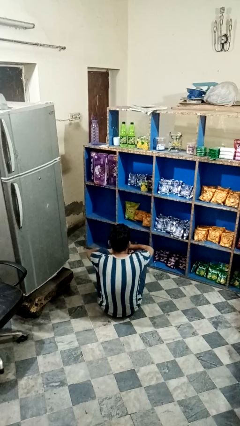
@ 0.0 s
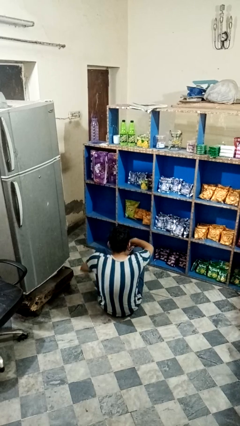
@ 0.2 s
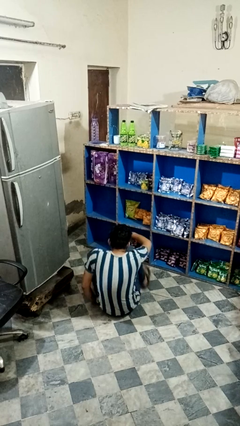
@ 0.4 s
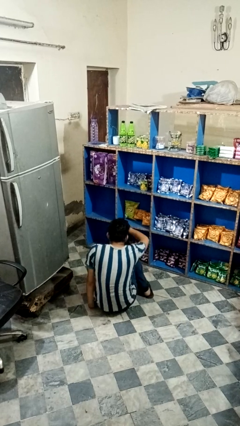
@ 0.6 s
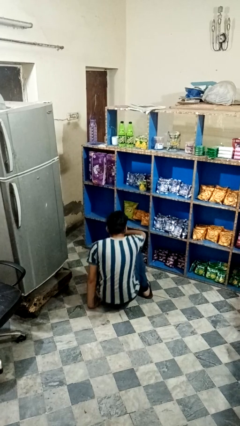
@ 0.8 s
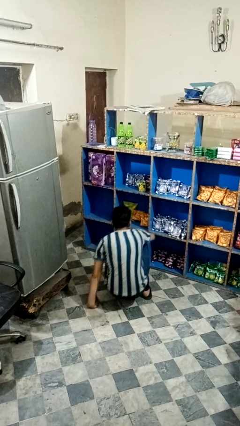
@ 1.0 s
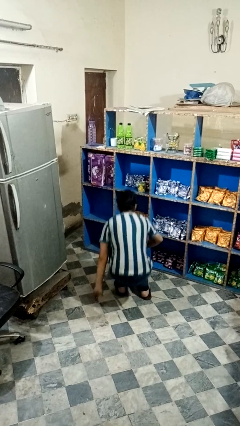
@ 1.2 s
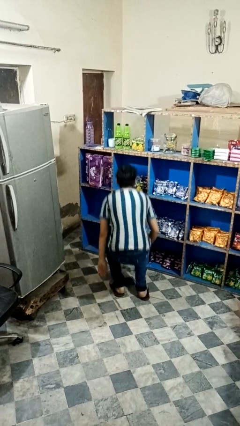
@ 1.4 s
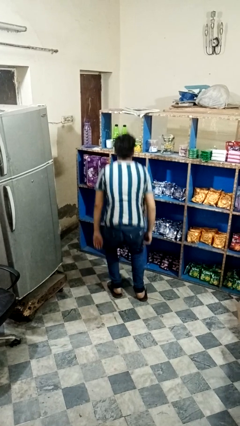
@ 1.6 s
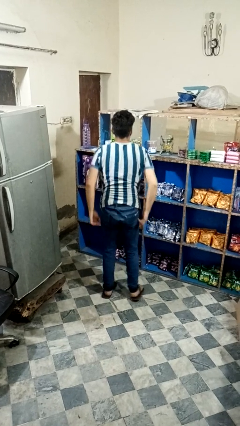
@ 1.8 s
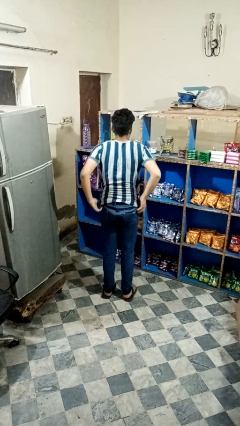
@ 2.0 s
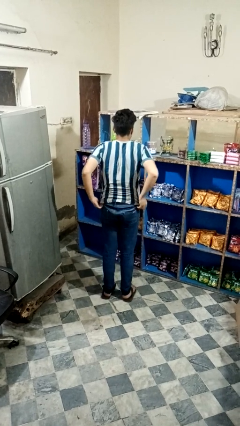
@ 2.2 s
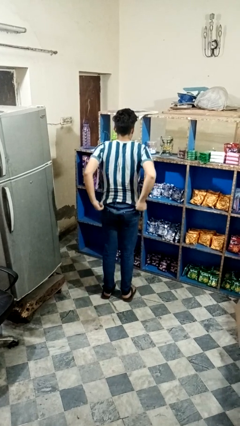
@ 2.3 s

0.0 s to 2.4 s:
person stands up from floor

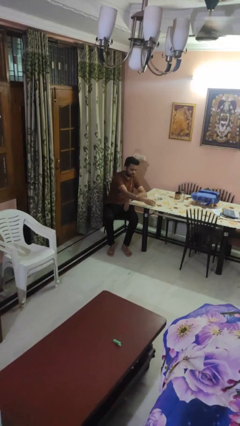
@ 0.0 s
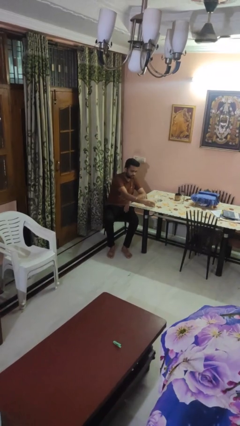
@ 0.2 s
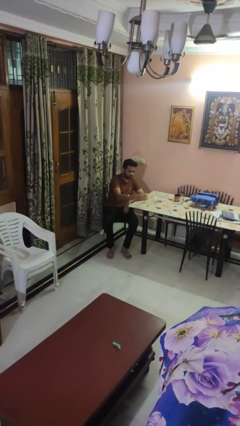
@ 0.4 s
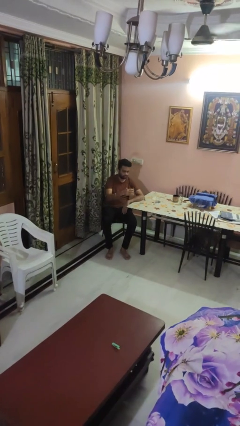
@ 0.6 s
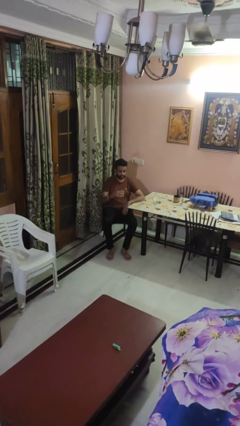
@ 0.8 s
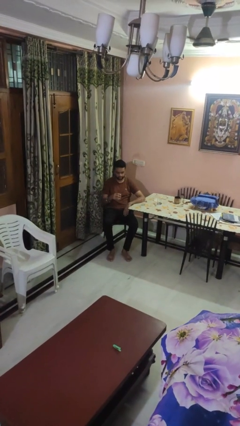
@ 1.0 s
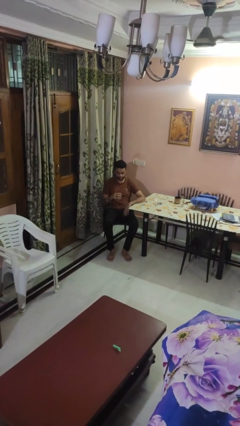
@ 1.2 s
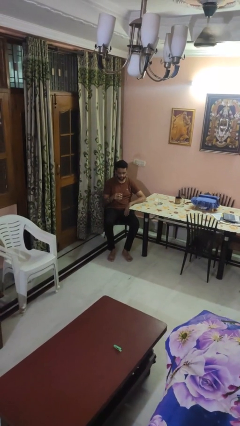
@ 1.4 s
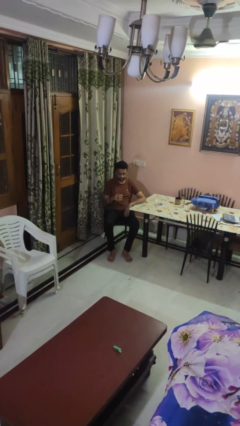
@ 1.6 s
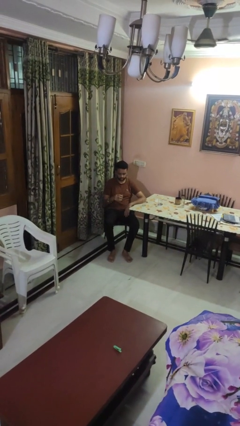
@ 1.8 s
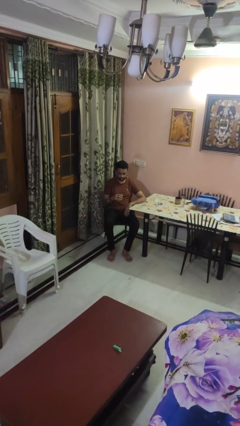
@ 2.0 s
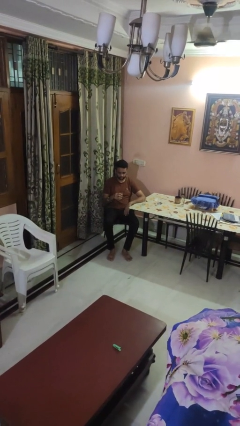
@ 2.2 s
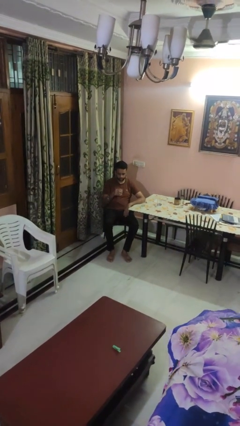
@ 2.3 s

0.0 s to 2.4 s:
person picks up object from table

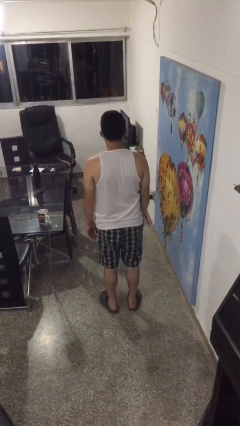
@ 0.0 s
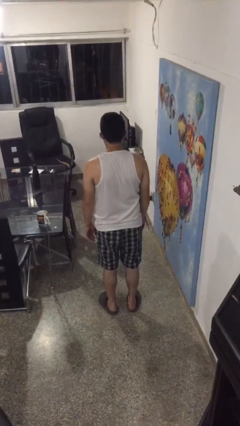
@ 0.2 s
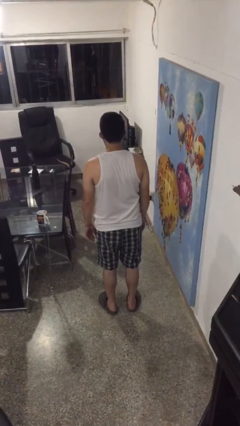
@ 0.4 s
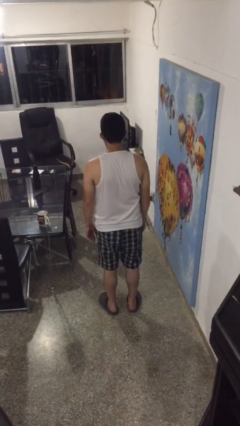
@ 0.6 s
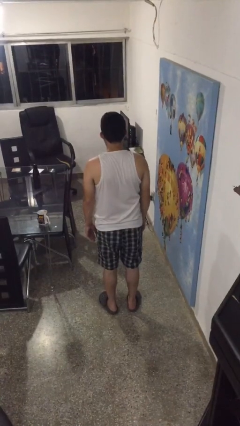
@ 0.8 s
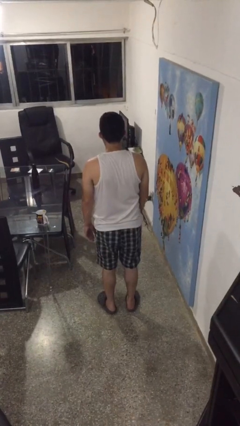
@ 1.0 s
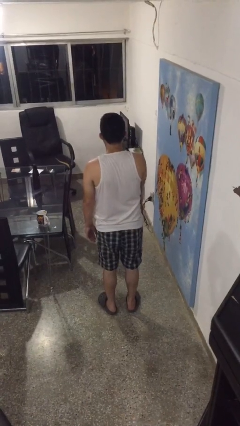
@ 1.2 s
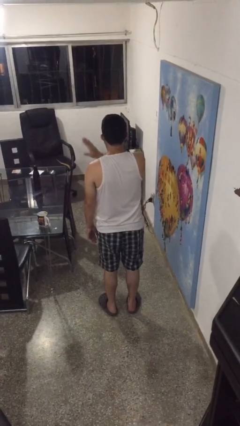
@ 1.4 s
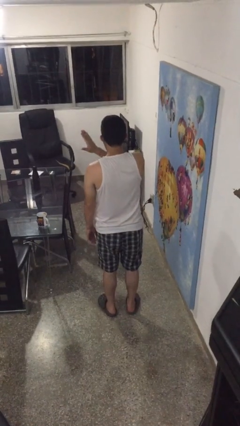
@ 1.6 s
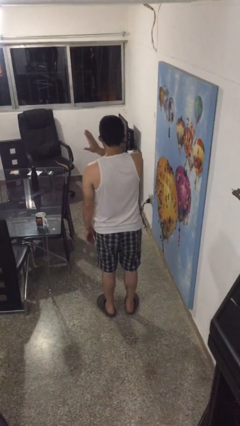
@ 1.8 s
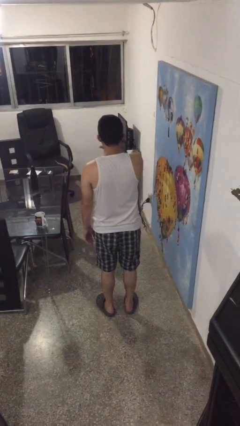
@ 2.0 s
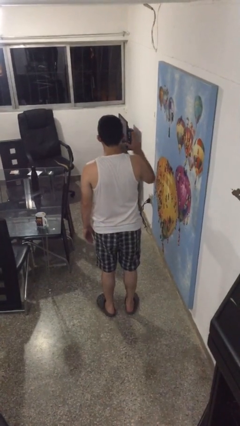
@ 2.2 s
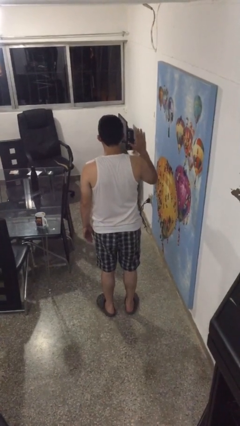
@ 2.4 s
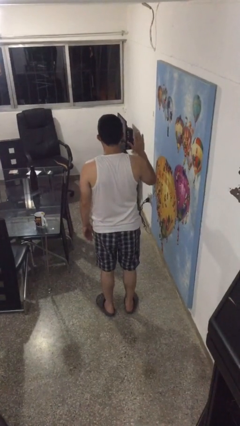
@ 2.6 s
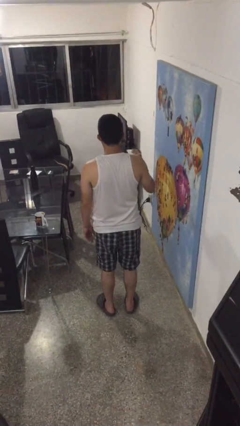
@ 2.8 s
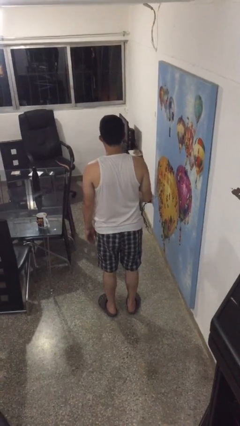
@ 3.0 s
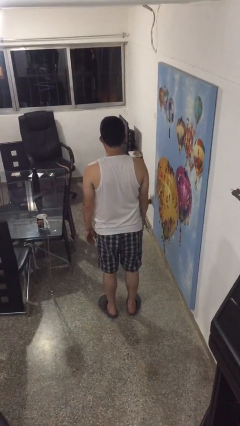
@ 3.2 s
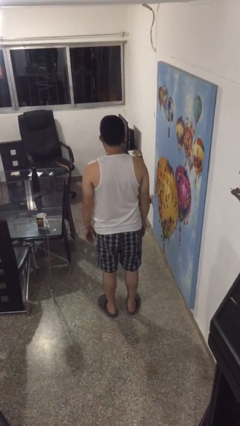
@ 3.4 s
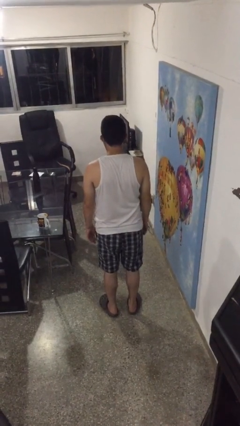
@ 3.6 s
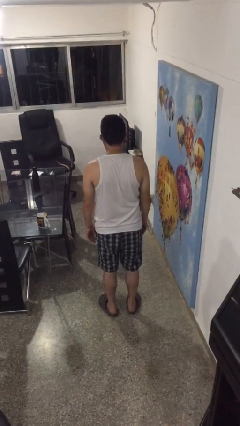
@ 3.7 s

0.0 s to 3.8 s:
person gestures swipe right

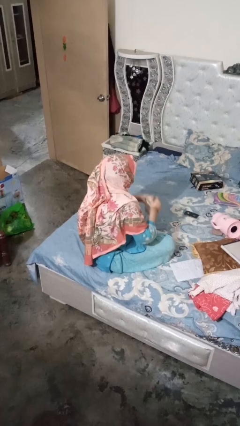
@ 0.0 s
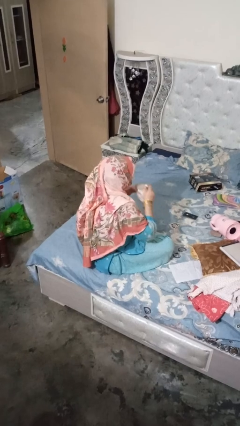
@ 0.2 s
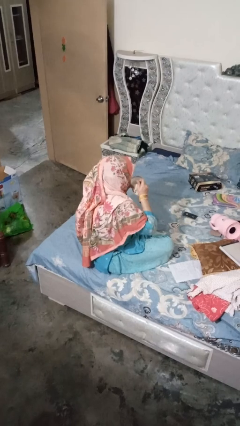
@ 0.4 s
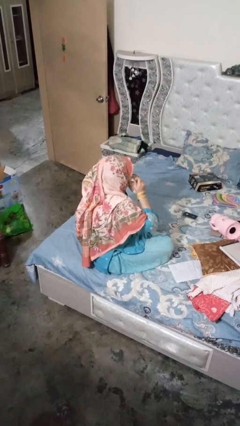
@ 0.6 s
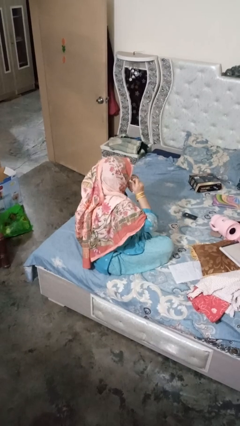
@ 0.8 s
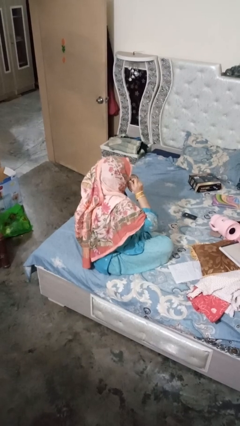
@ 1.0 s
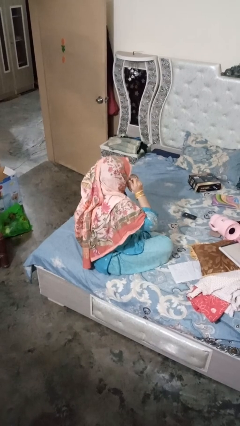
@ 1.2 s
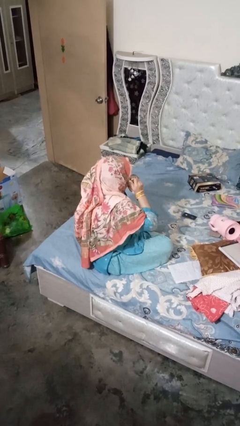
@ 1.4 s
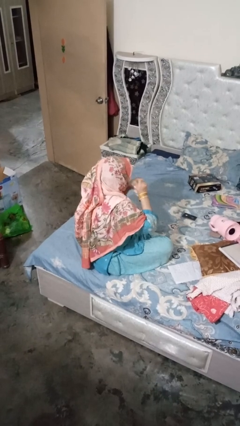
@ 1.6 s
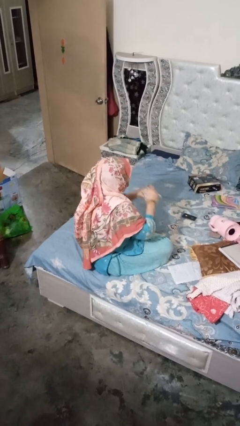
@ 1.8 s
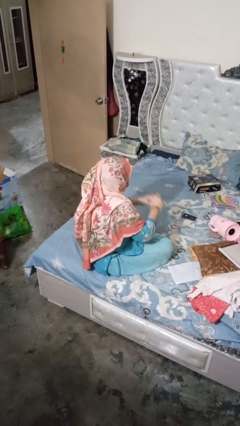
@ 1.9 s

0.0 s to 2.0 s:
person drinks from mug

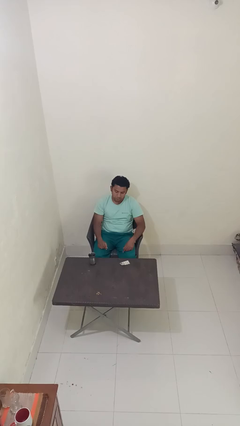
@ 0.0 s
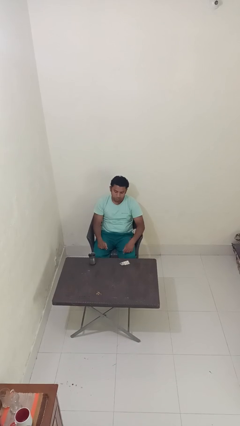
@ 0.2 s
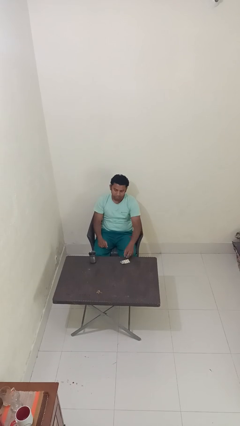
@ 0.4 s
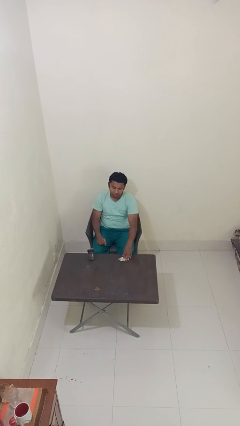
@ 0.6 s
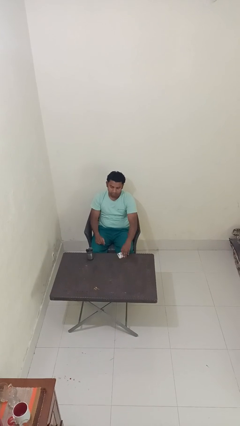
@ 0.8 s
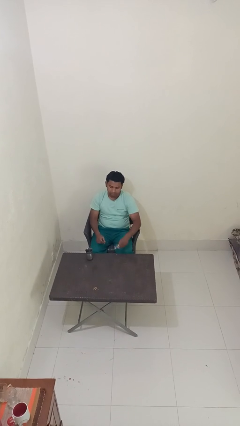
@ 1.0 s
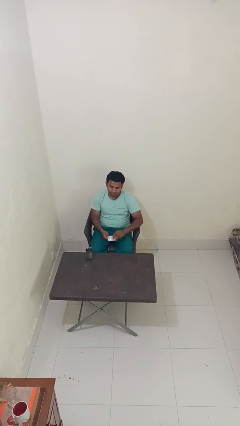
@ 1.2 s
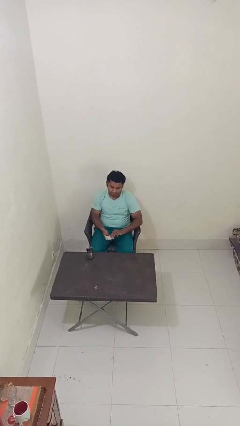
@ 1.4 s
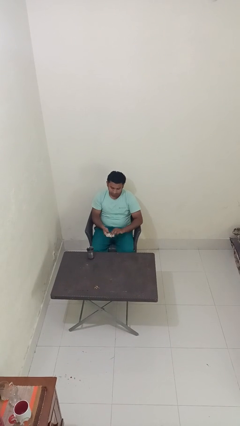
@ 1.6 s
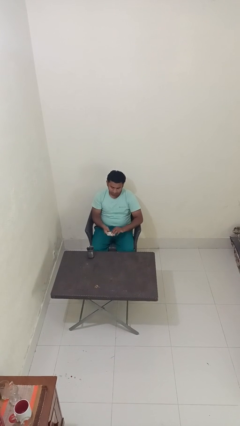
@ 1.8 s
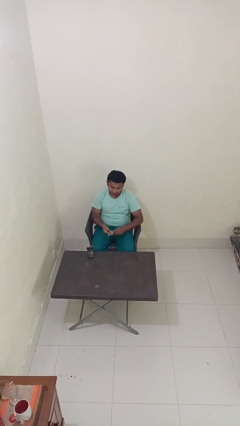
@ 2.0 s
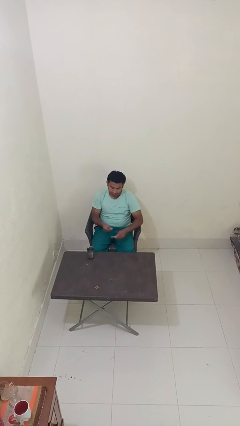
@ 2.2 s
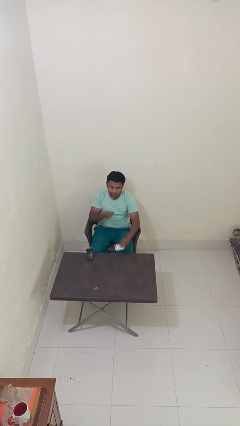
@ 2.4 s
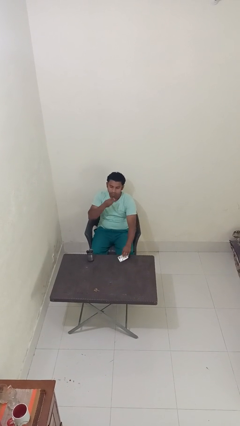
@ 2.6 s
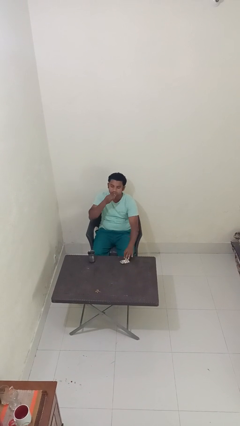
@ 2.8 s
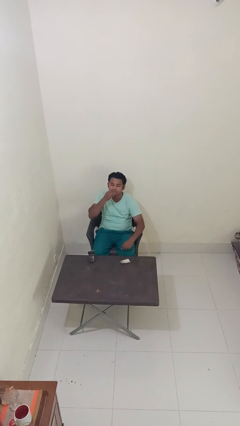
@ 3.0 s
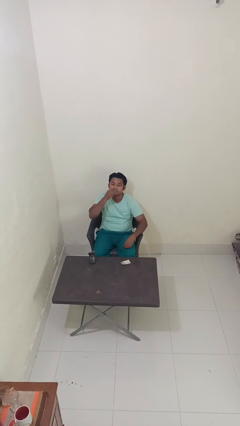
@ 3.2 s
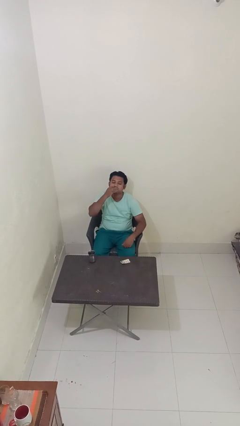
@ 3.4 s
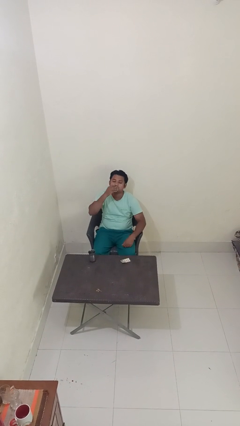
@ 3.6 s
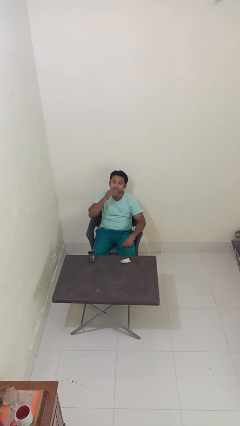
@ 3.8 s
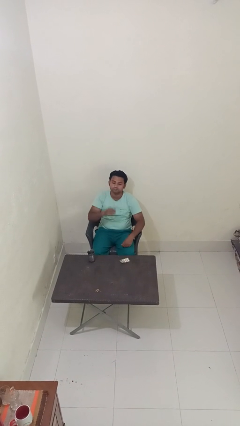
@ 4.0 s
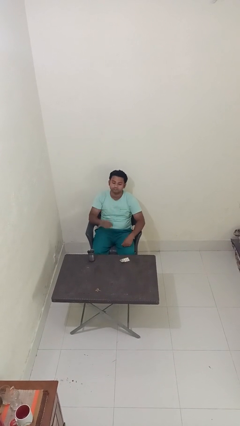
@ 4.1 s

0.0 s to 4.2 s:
person takes medicine pills

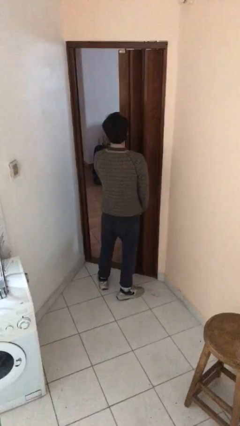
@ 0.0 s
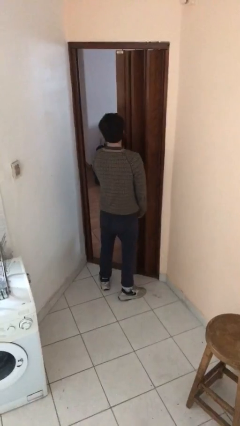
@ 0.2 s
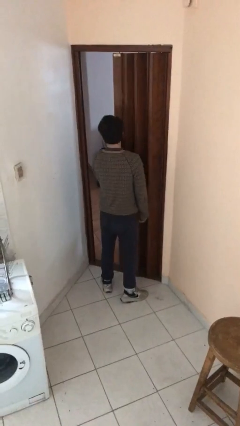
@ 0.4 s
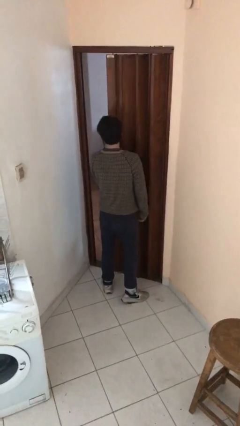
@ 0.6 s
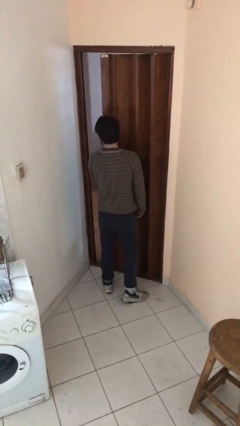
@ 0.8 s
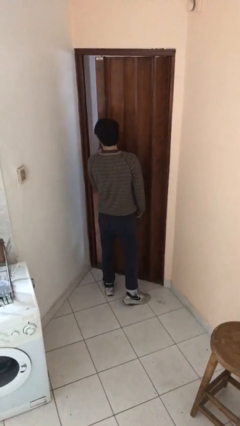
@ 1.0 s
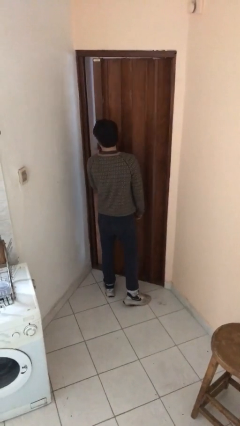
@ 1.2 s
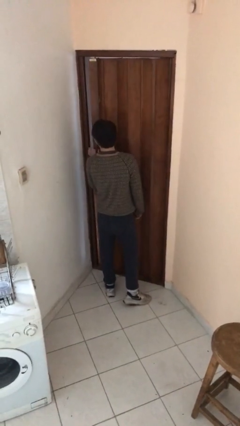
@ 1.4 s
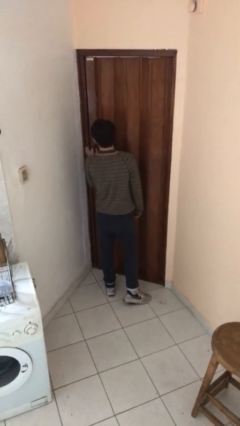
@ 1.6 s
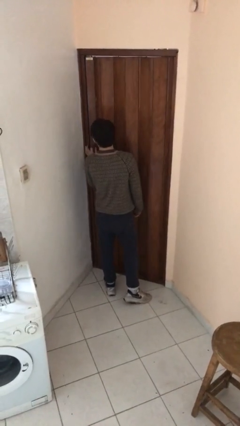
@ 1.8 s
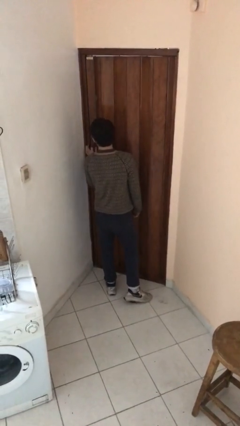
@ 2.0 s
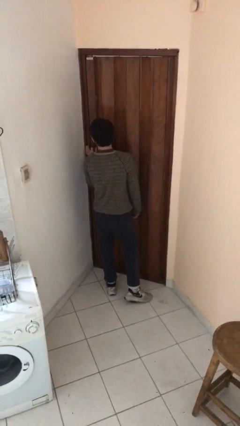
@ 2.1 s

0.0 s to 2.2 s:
person closes sliding door

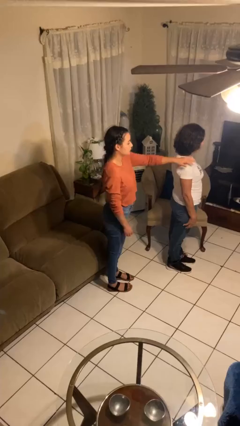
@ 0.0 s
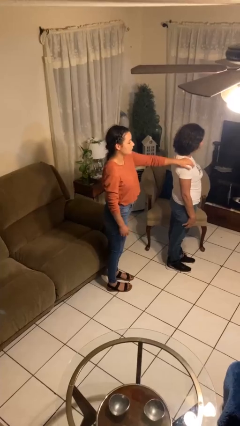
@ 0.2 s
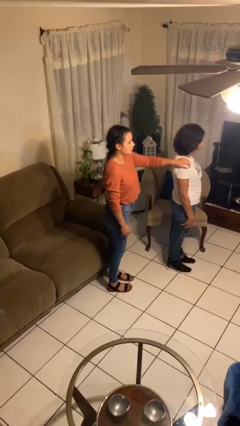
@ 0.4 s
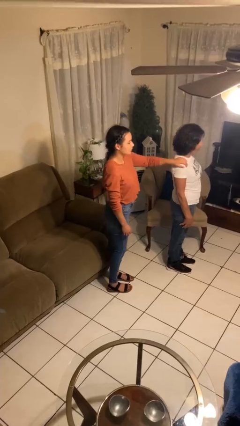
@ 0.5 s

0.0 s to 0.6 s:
person grabs person by shoulder
